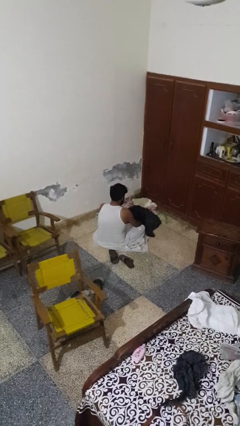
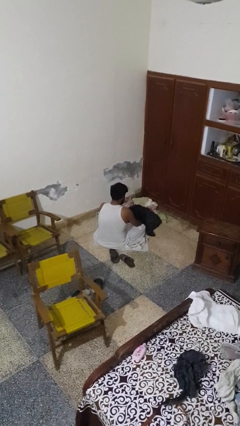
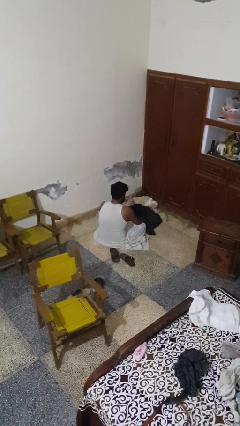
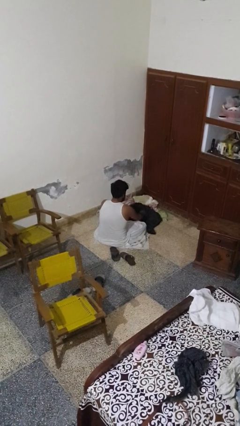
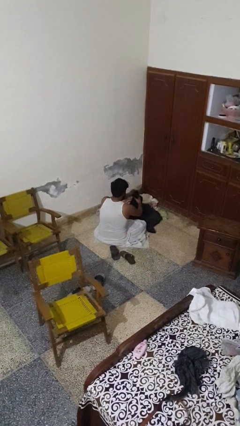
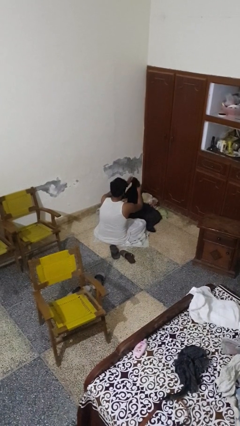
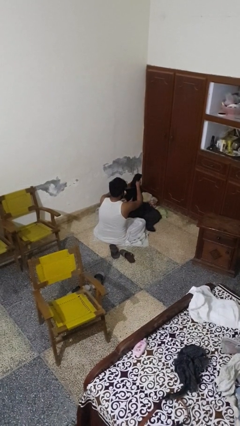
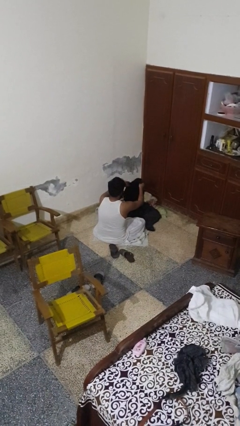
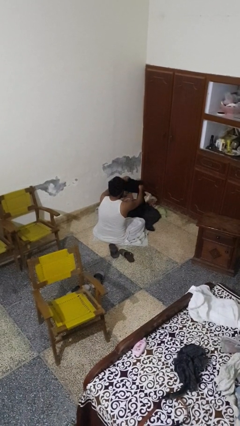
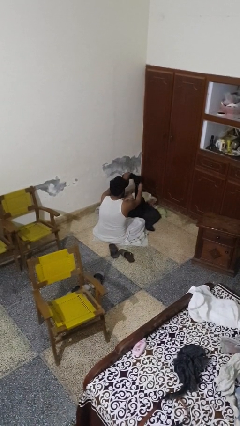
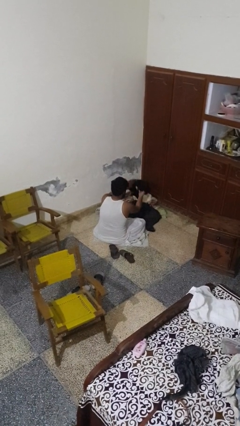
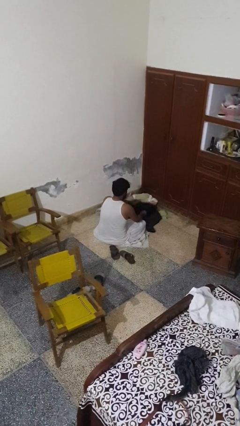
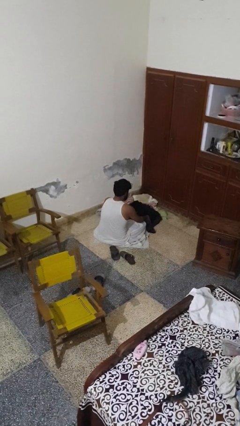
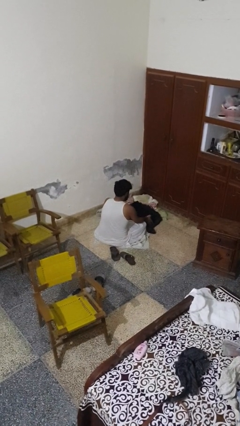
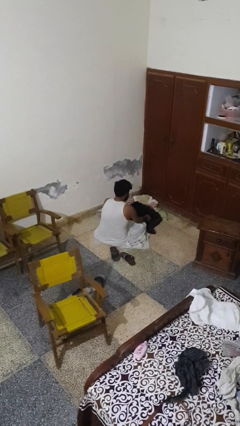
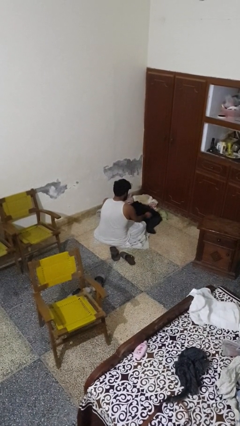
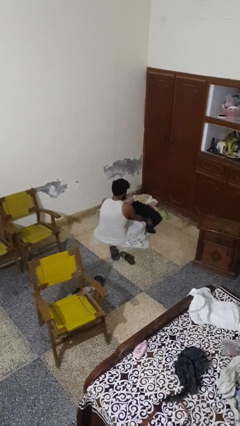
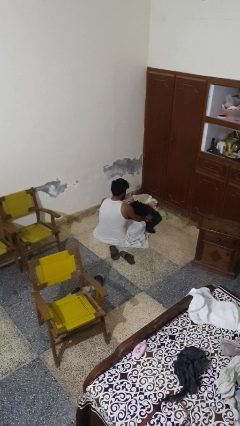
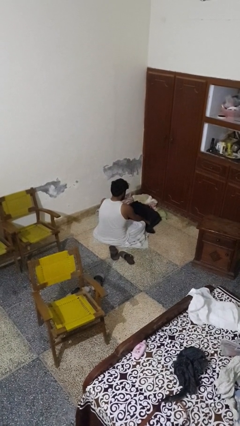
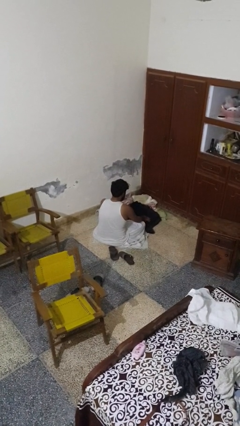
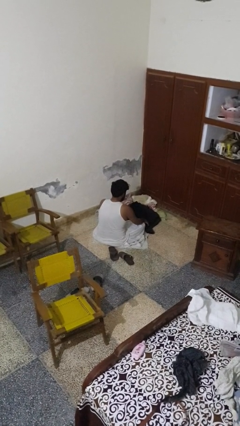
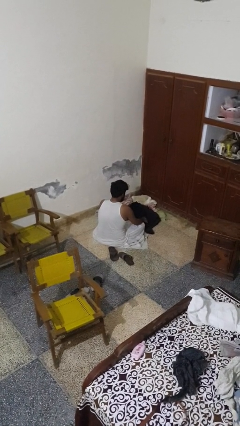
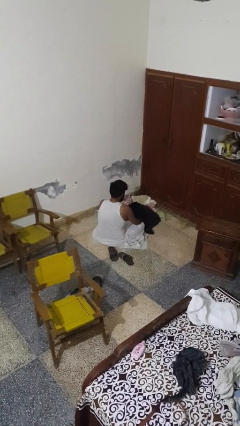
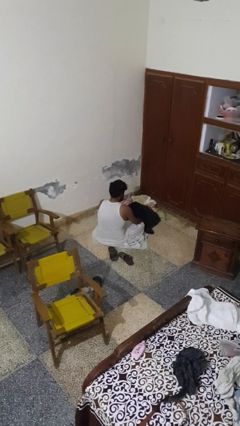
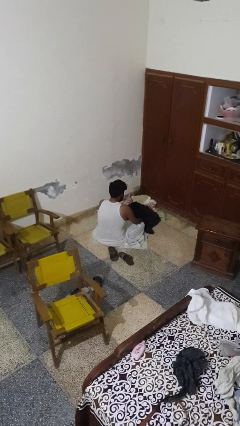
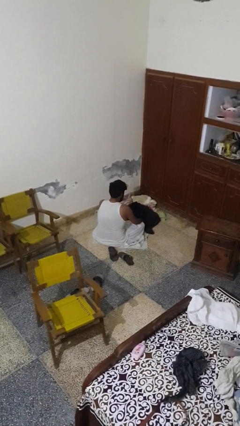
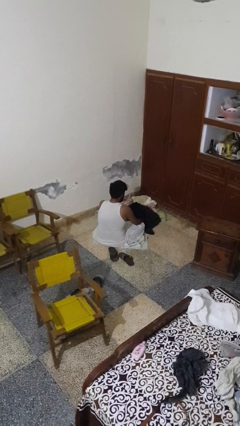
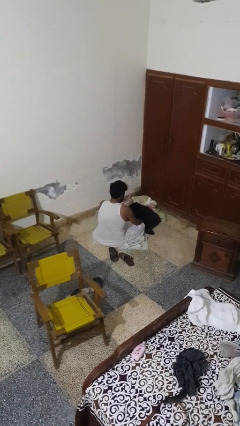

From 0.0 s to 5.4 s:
person folds pants

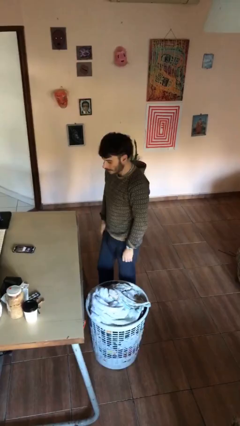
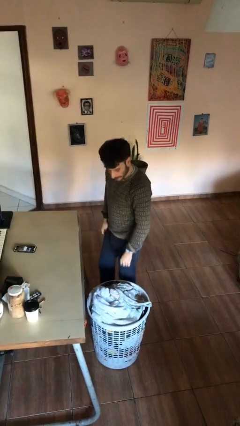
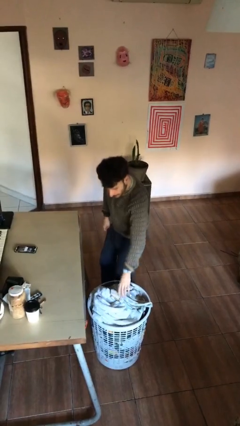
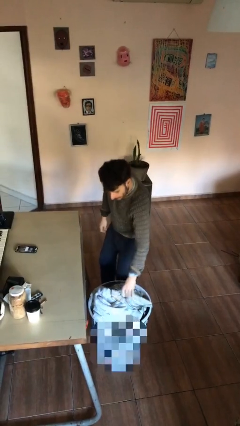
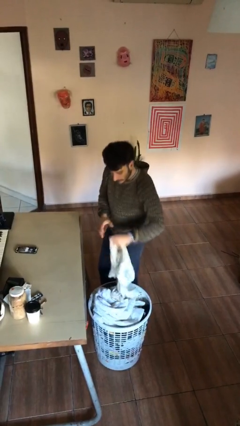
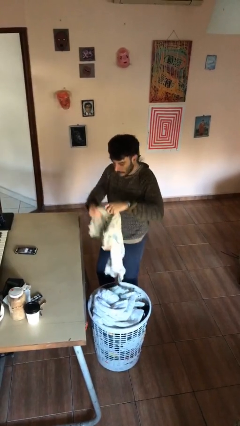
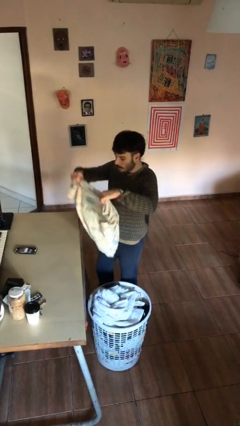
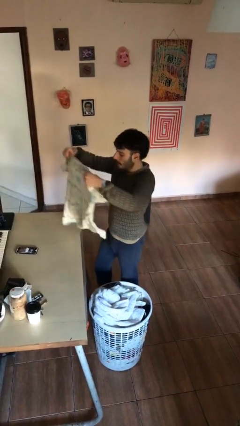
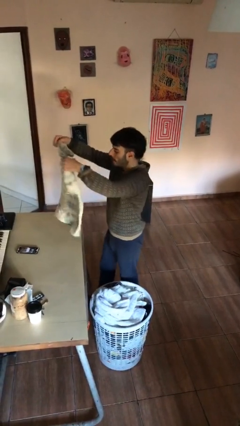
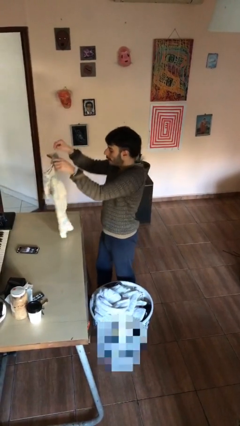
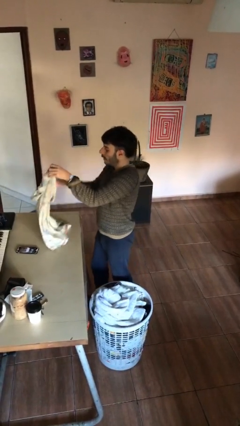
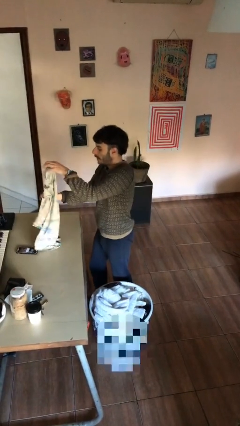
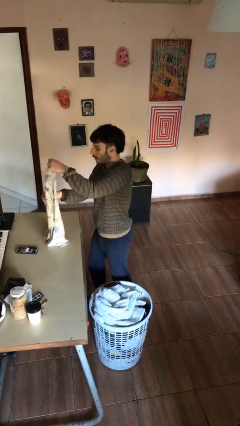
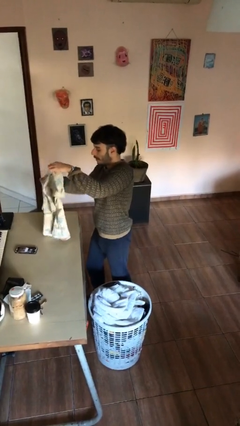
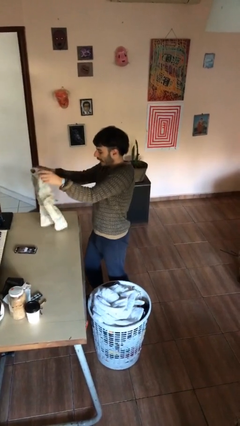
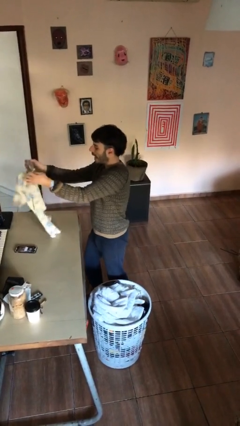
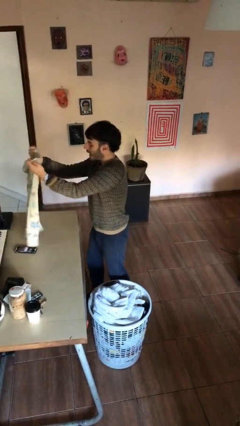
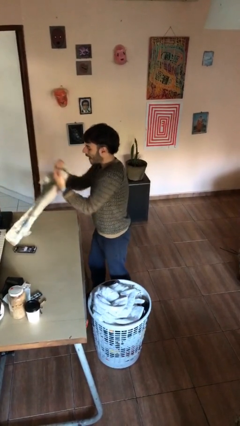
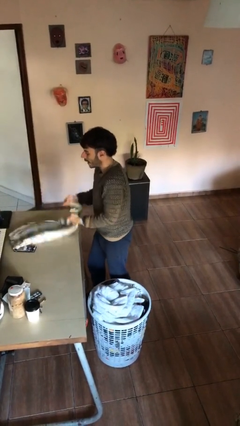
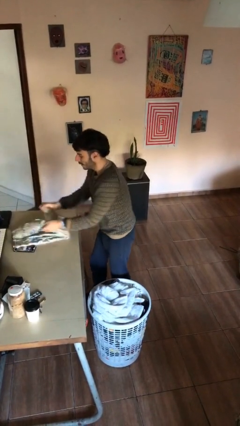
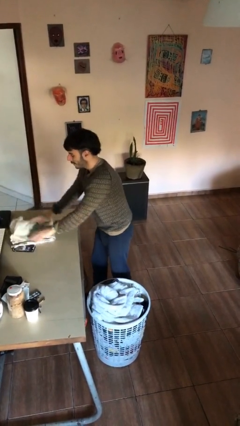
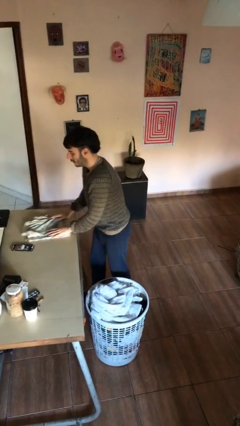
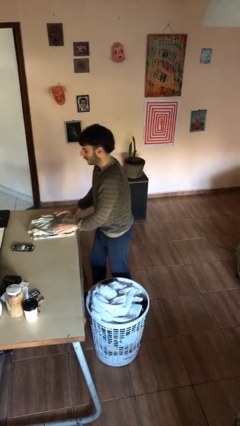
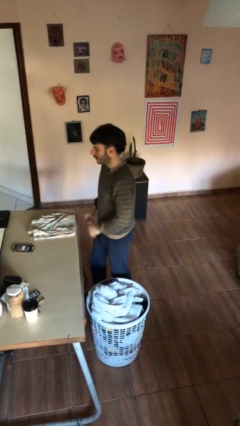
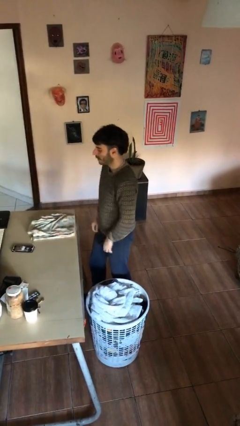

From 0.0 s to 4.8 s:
person folds shirt

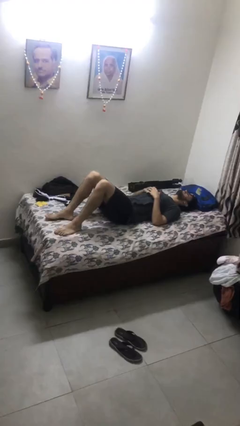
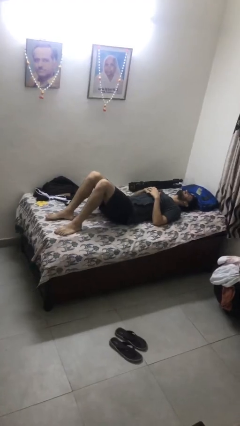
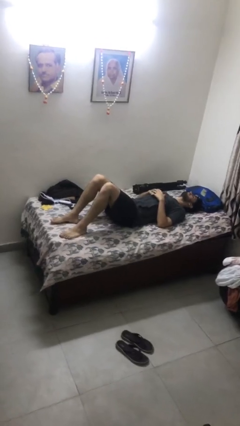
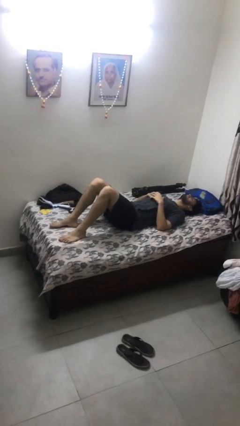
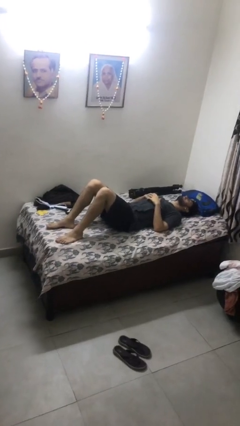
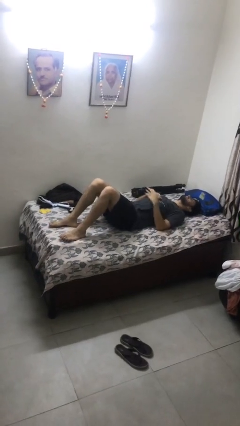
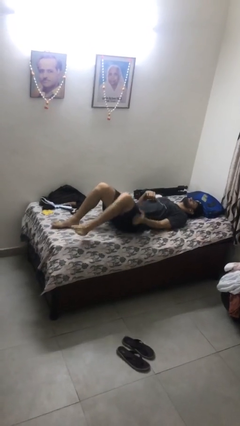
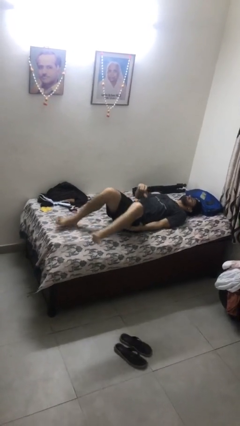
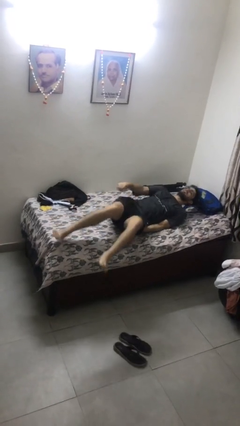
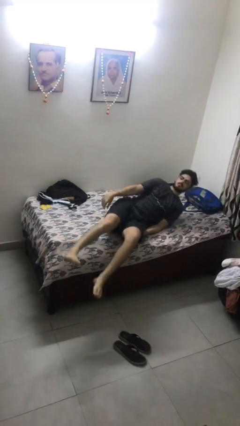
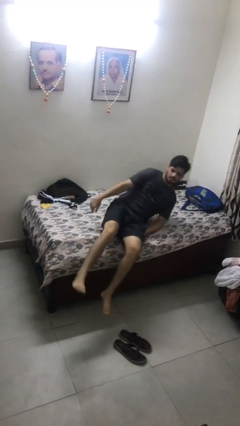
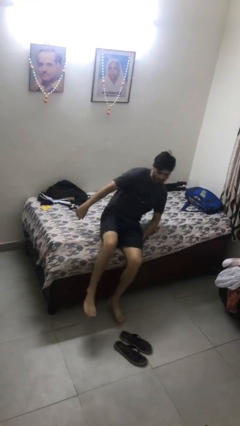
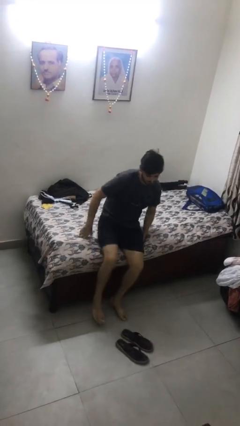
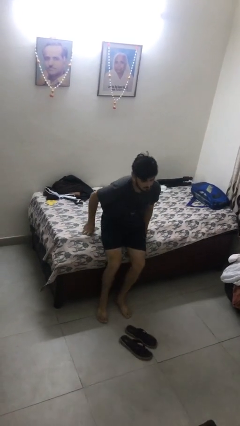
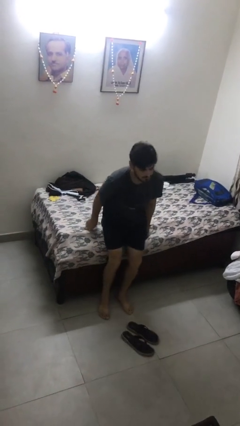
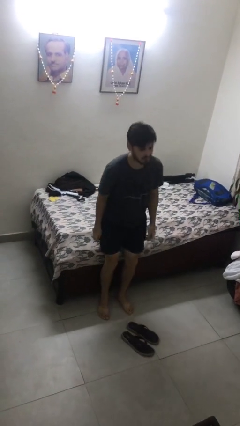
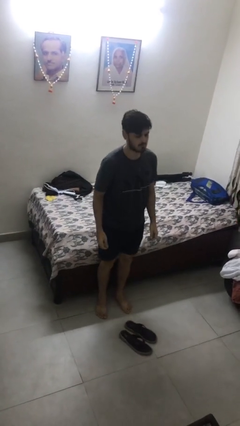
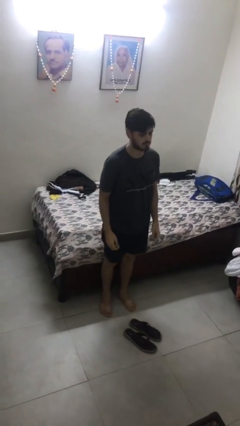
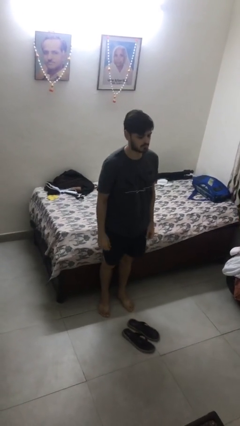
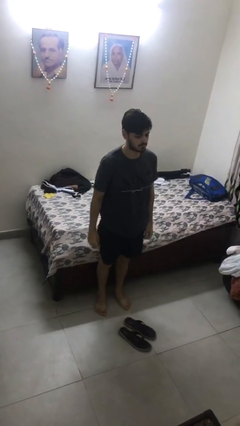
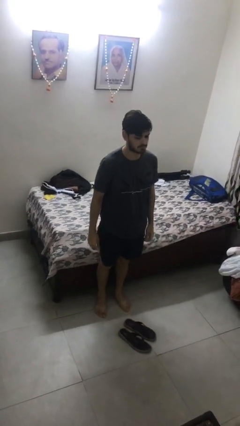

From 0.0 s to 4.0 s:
person stands up

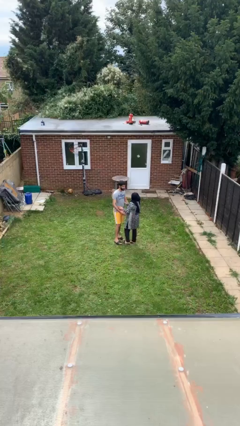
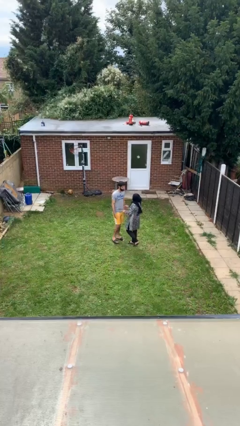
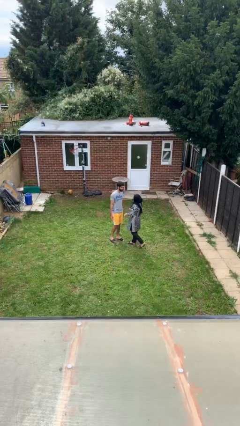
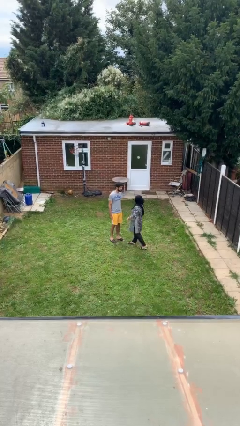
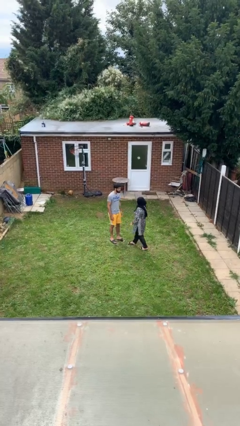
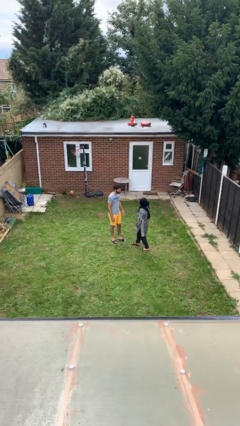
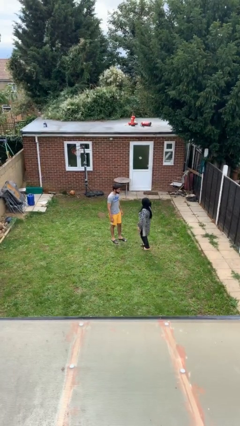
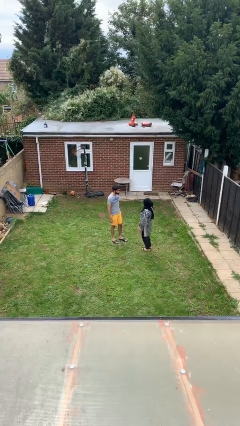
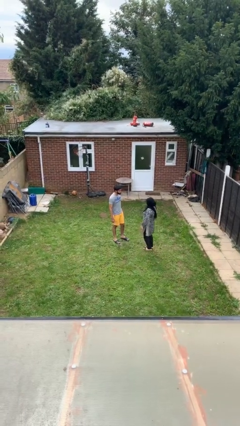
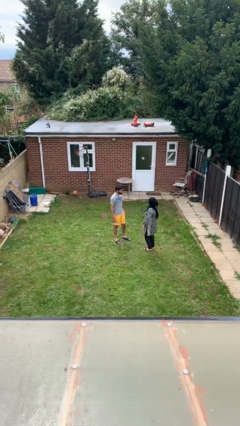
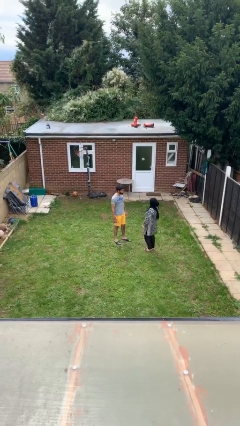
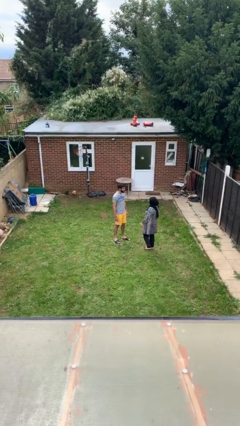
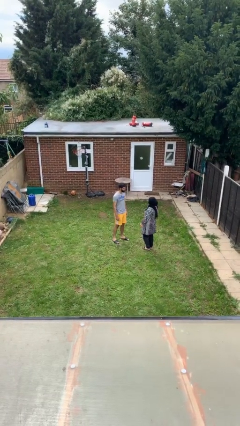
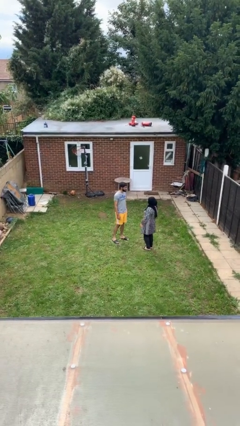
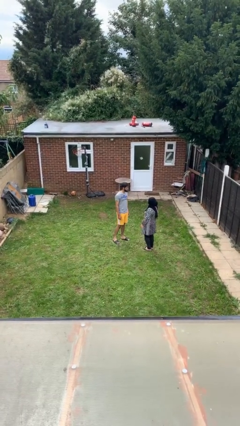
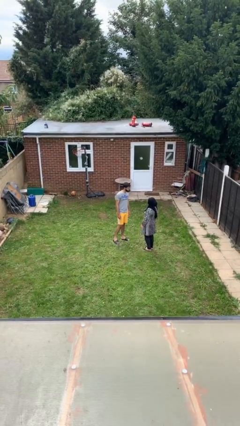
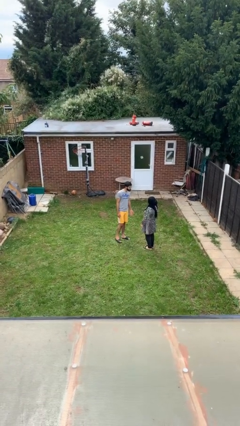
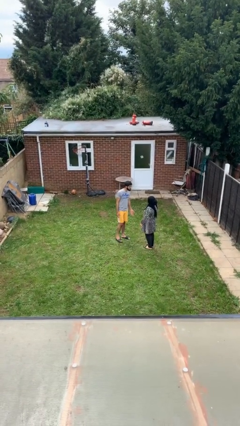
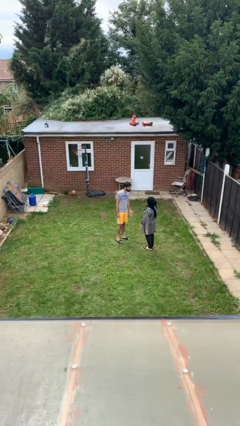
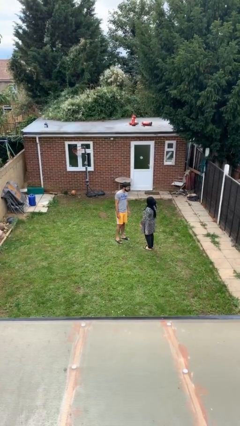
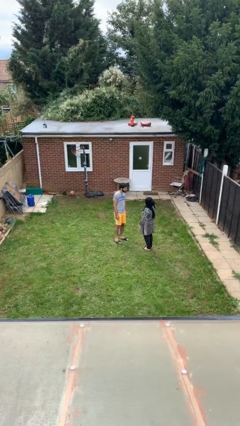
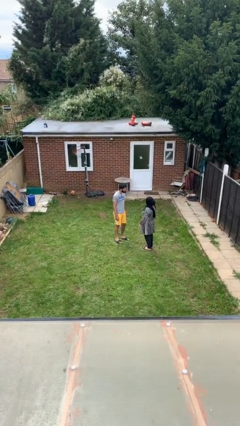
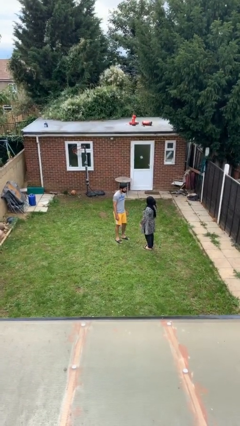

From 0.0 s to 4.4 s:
person talks to person
